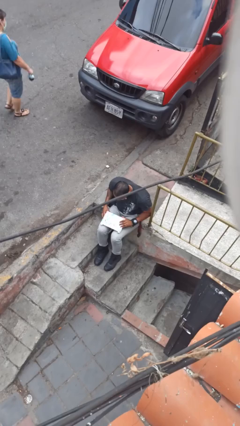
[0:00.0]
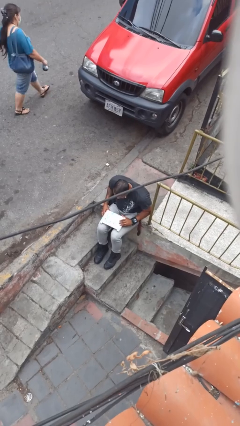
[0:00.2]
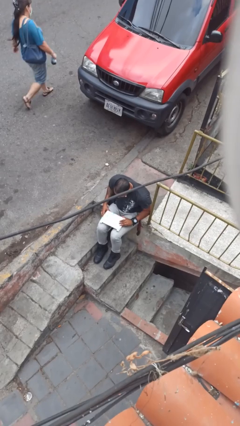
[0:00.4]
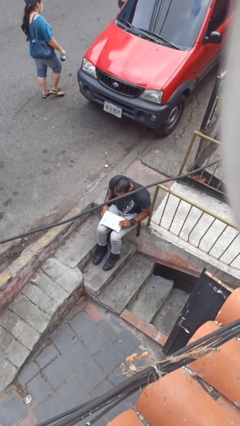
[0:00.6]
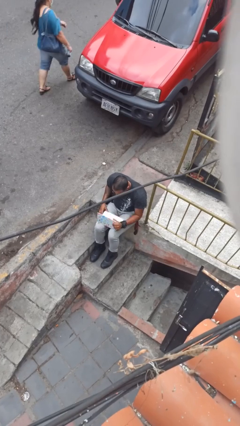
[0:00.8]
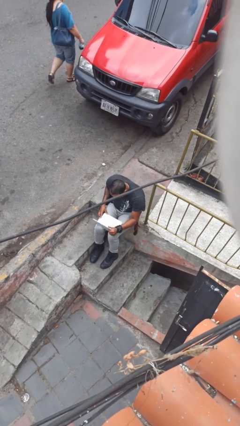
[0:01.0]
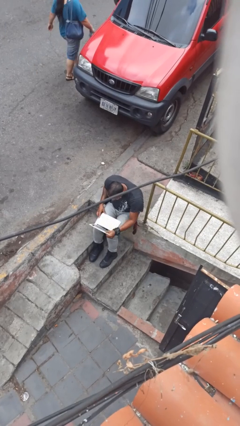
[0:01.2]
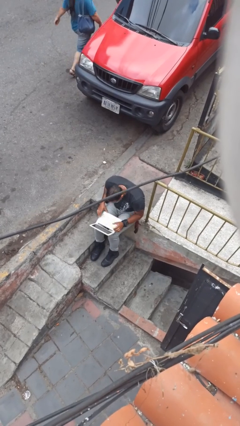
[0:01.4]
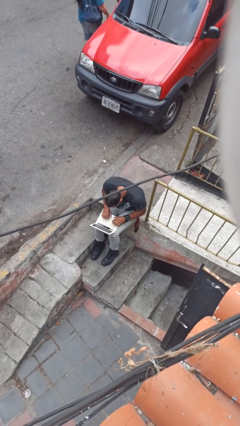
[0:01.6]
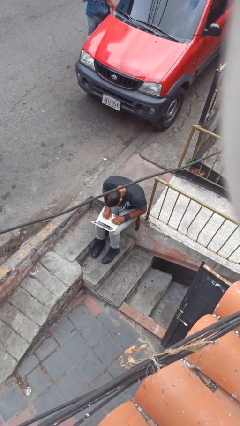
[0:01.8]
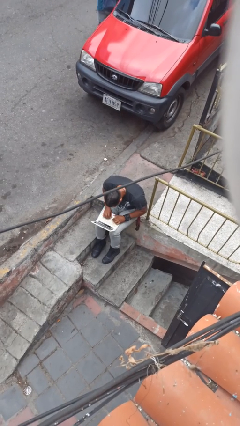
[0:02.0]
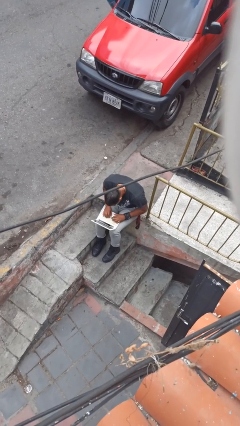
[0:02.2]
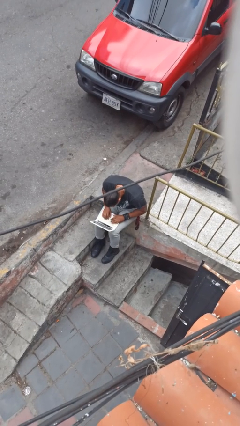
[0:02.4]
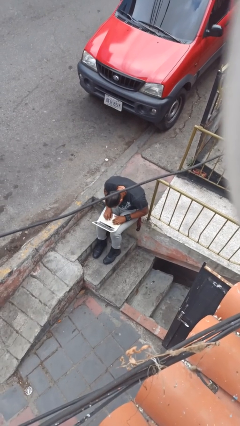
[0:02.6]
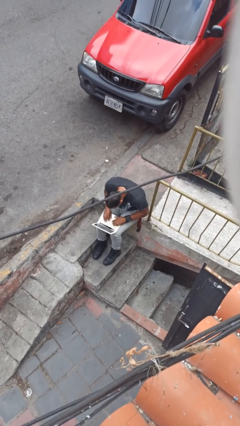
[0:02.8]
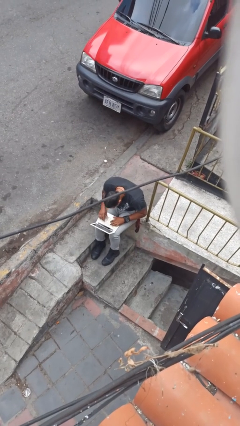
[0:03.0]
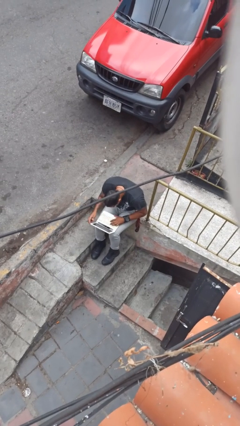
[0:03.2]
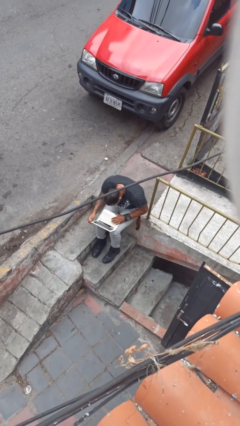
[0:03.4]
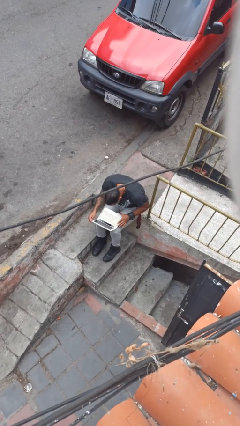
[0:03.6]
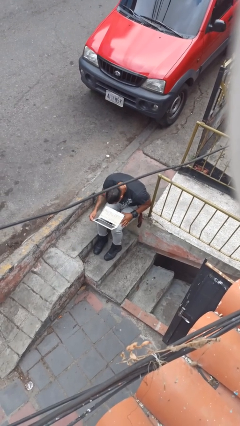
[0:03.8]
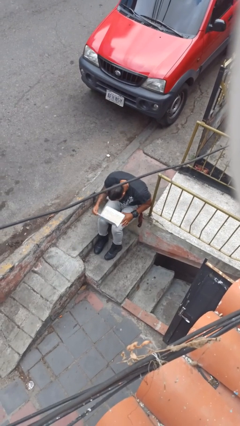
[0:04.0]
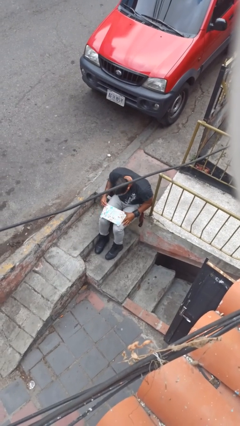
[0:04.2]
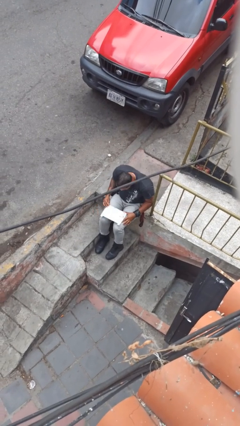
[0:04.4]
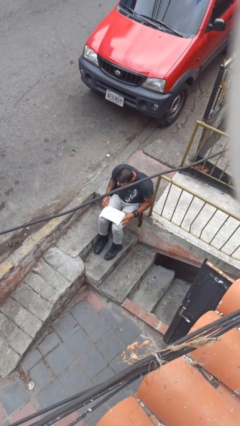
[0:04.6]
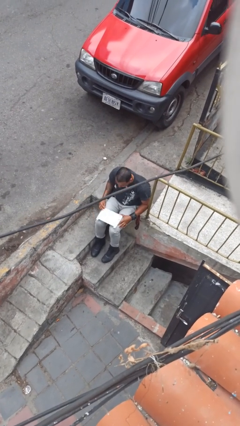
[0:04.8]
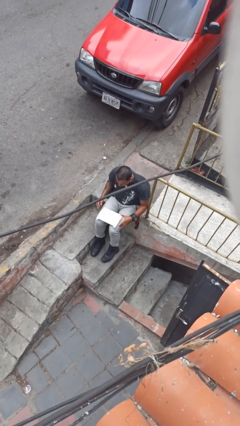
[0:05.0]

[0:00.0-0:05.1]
person interacts with laptop

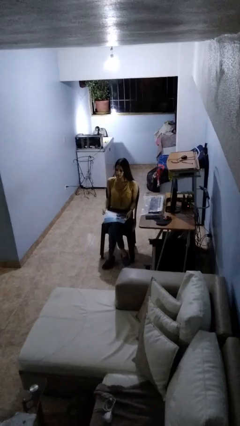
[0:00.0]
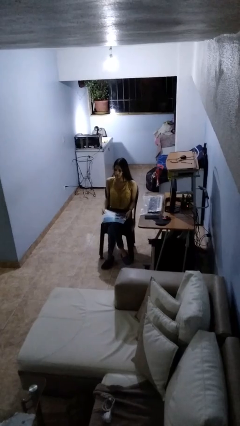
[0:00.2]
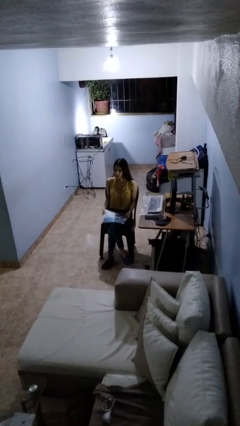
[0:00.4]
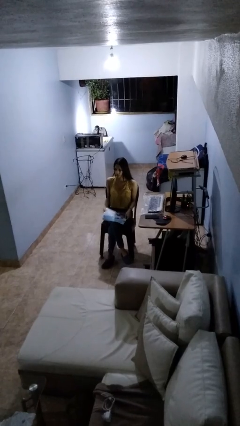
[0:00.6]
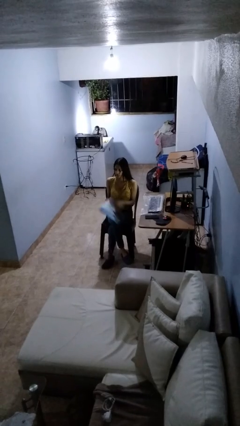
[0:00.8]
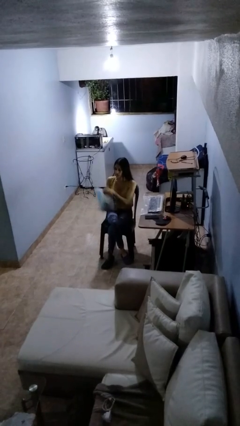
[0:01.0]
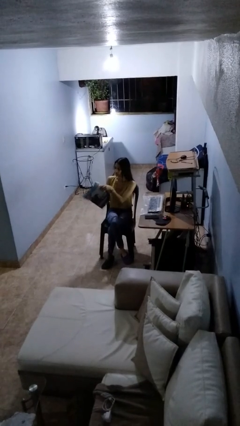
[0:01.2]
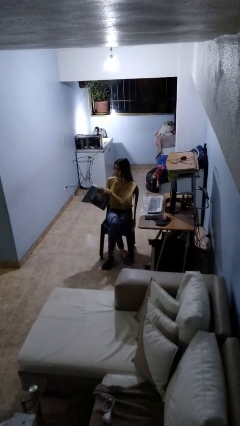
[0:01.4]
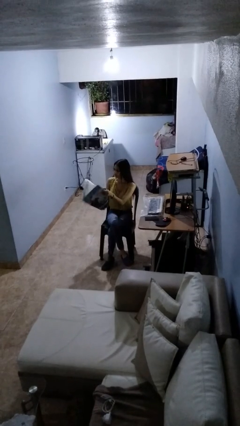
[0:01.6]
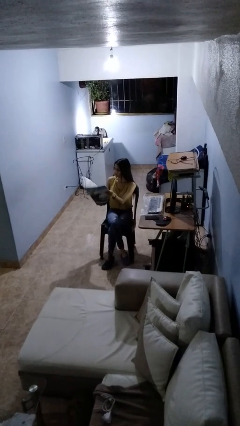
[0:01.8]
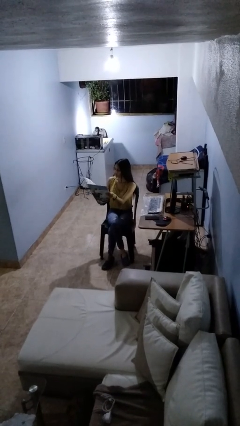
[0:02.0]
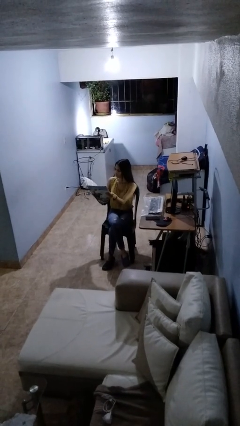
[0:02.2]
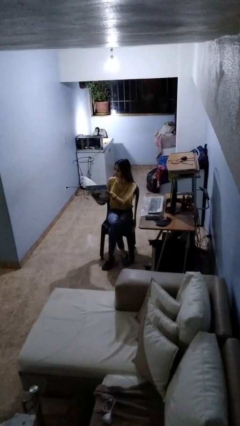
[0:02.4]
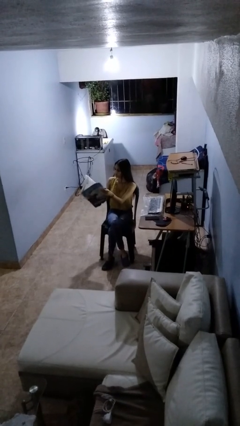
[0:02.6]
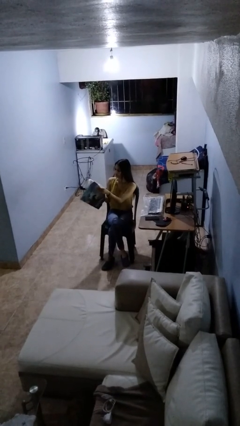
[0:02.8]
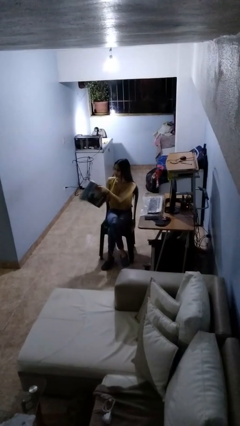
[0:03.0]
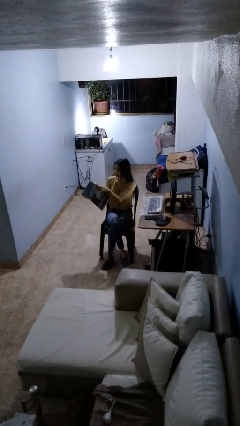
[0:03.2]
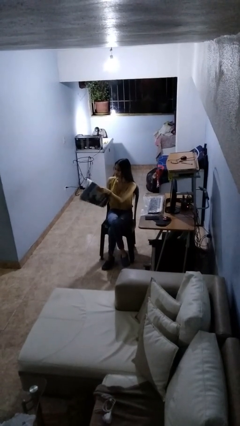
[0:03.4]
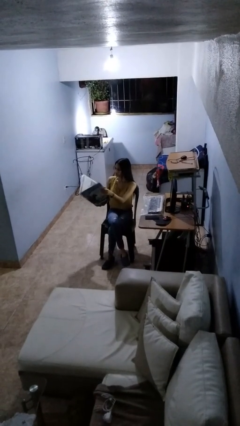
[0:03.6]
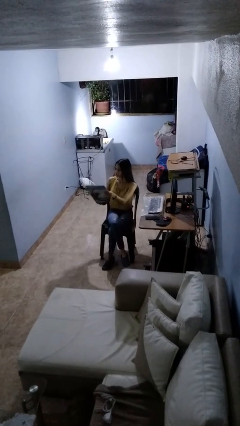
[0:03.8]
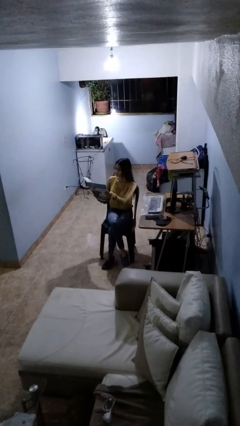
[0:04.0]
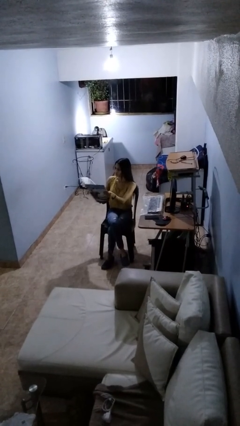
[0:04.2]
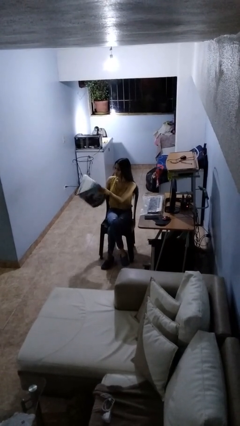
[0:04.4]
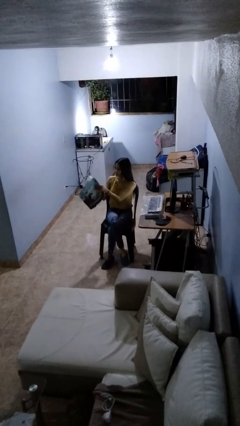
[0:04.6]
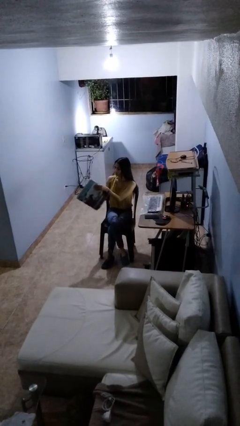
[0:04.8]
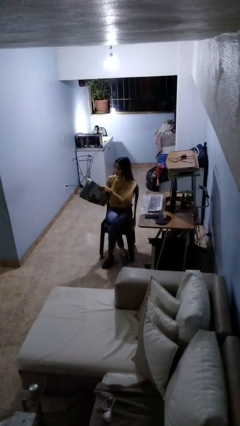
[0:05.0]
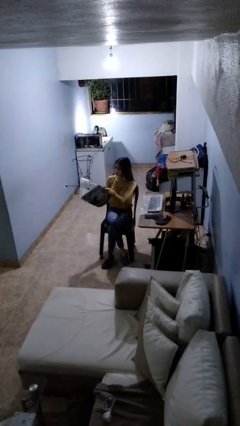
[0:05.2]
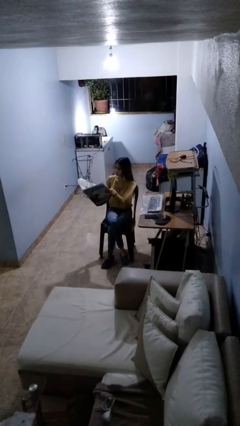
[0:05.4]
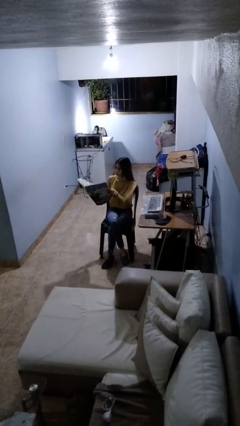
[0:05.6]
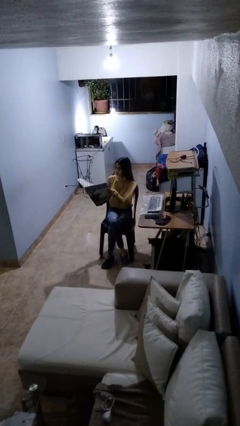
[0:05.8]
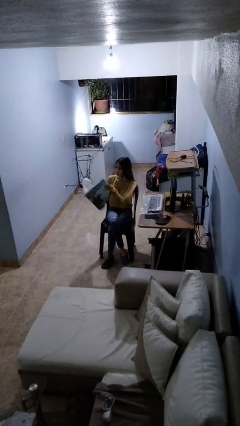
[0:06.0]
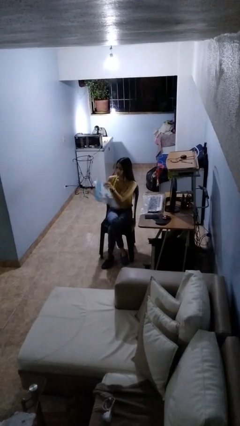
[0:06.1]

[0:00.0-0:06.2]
person reads newspaper

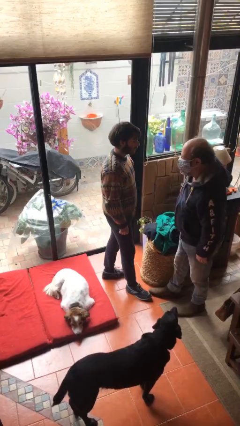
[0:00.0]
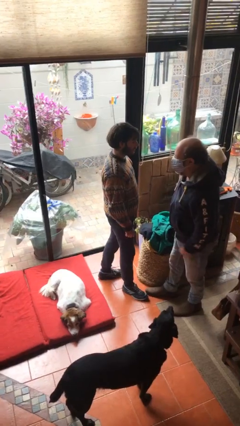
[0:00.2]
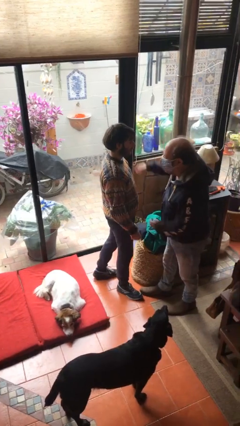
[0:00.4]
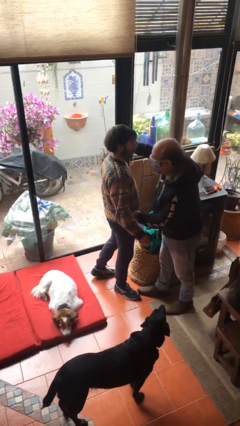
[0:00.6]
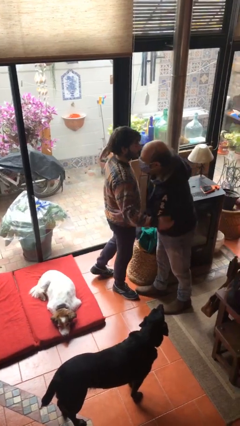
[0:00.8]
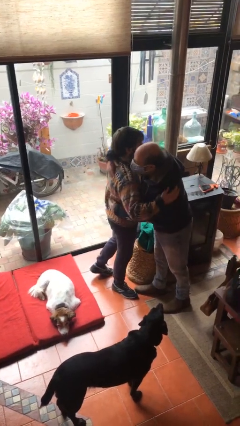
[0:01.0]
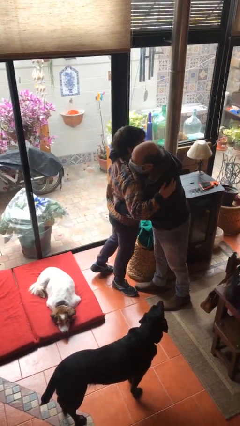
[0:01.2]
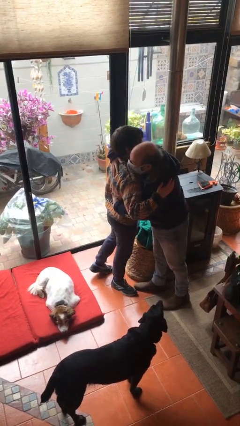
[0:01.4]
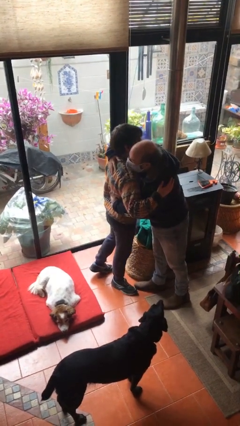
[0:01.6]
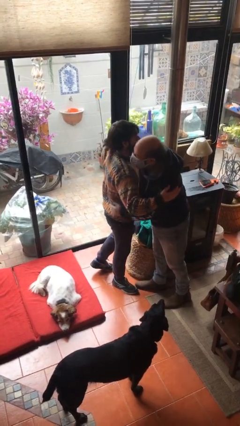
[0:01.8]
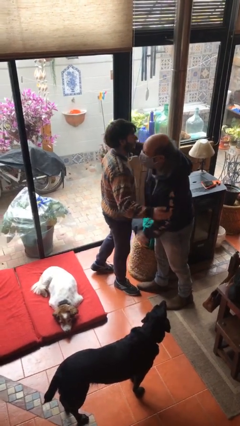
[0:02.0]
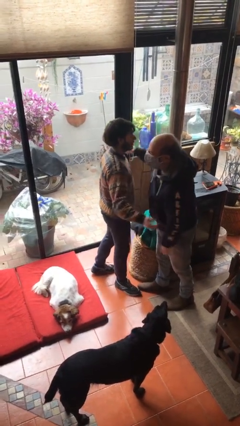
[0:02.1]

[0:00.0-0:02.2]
person kisses cheek of person

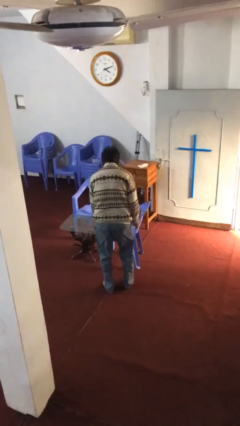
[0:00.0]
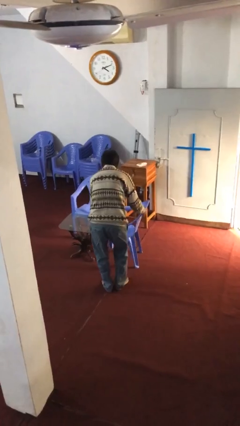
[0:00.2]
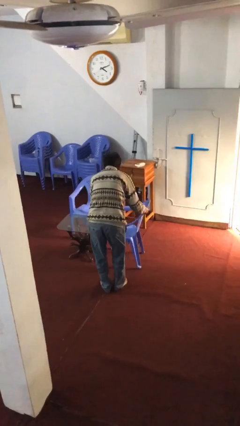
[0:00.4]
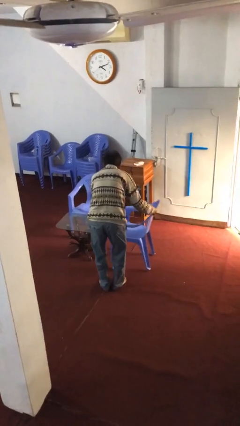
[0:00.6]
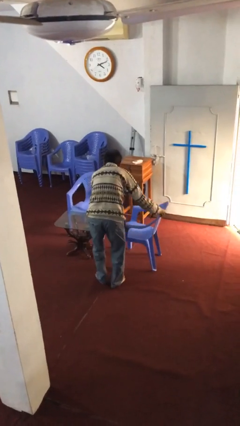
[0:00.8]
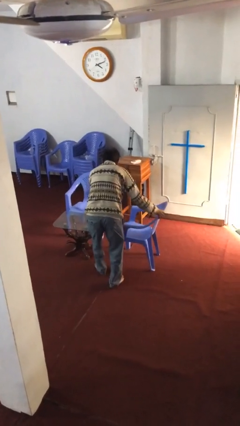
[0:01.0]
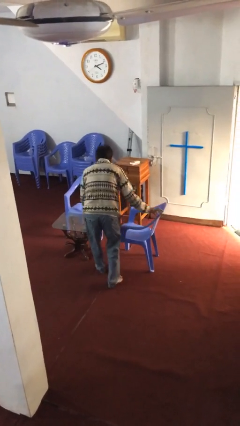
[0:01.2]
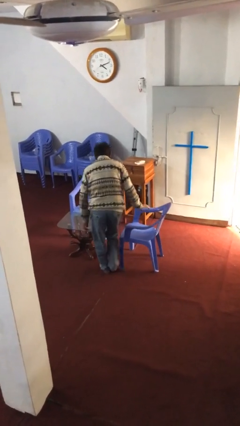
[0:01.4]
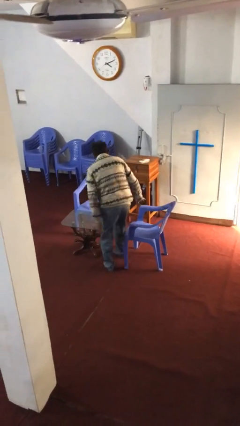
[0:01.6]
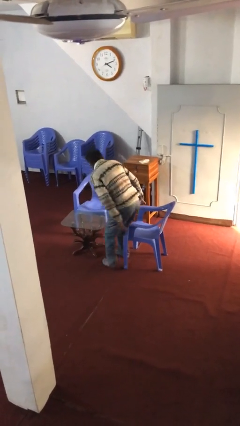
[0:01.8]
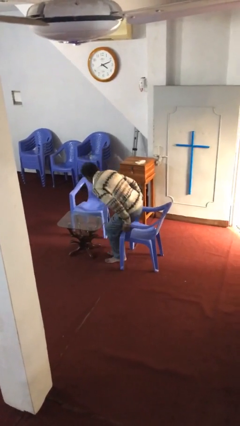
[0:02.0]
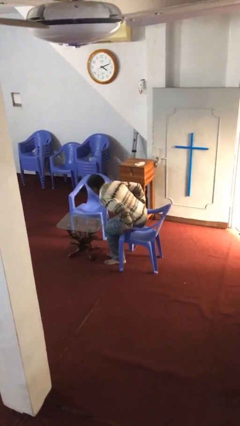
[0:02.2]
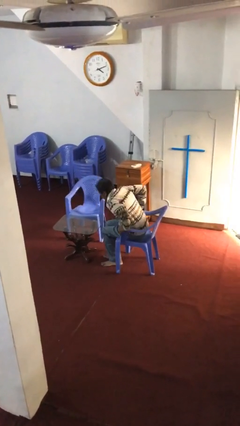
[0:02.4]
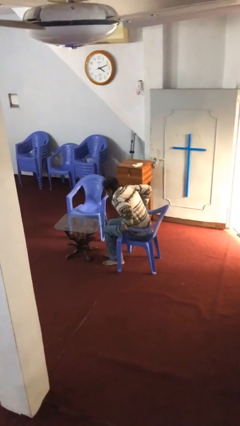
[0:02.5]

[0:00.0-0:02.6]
person sits down

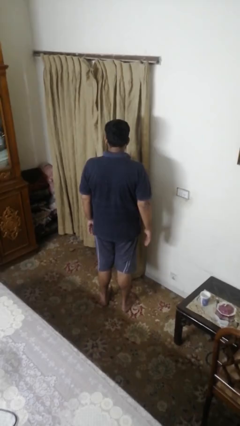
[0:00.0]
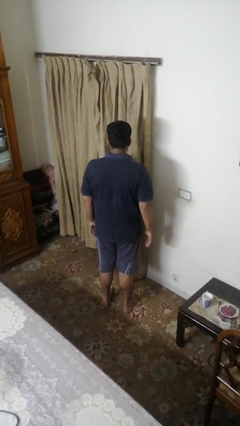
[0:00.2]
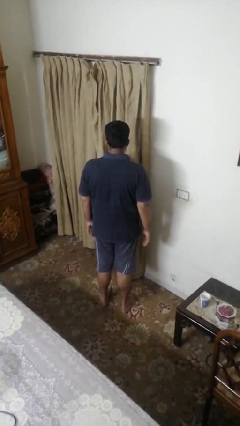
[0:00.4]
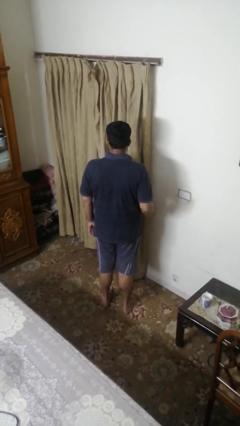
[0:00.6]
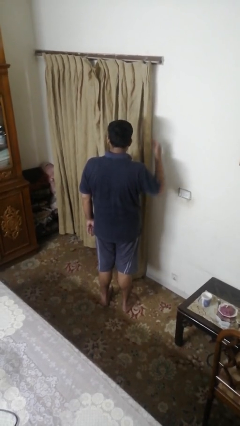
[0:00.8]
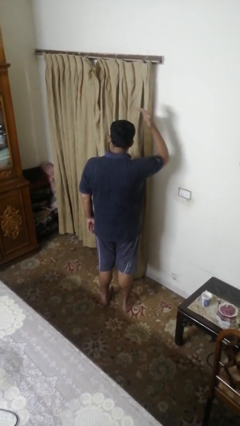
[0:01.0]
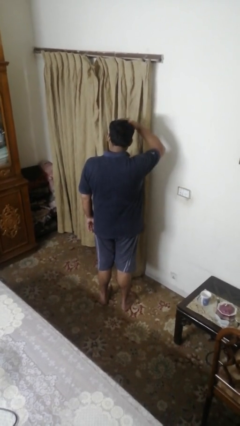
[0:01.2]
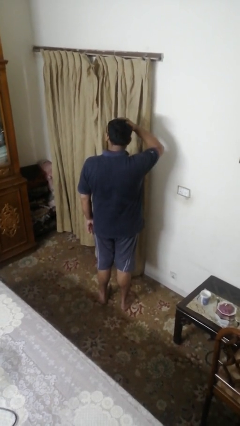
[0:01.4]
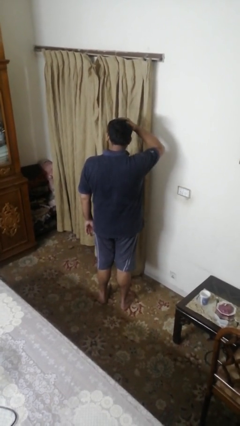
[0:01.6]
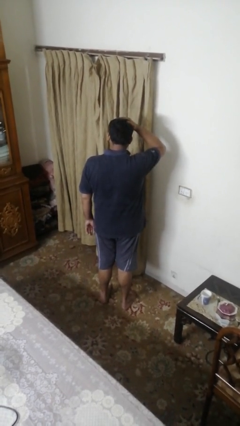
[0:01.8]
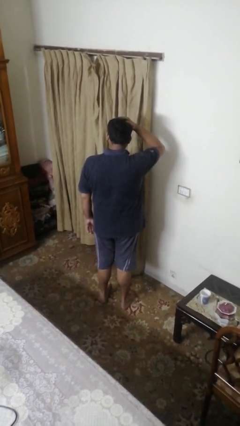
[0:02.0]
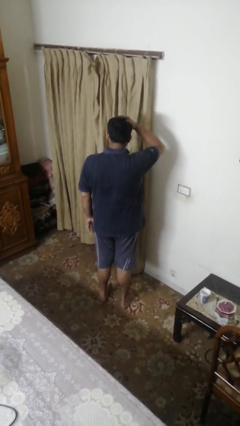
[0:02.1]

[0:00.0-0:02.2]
person pats head
